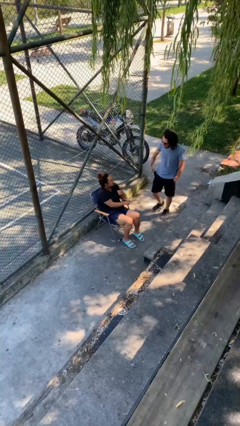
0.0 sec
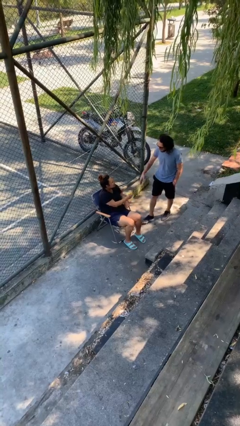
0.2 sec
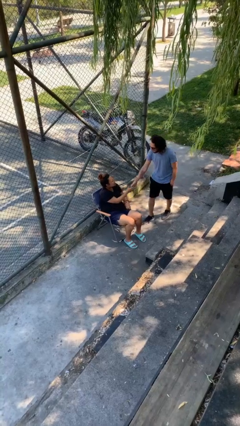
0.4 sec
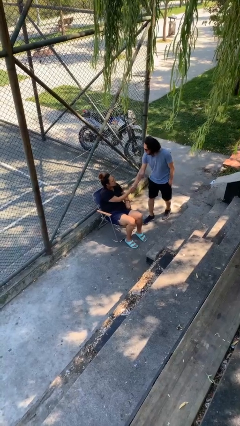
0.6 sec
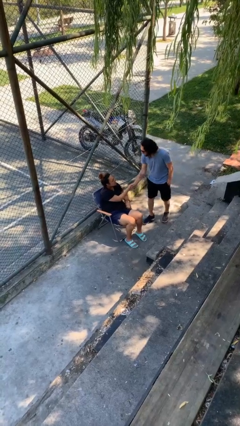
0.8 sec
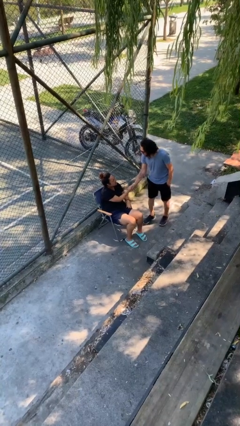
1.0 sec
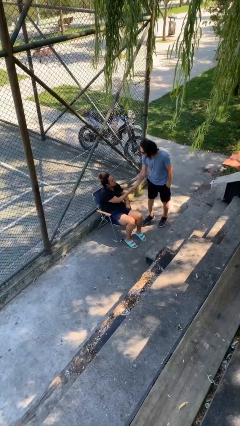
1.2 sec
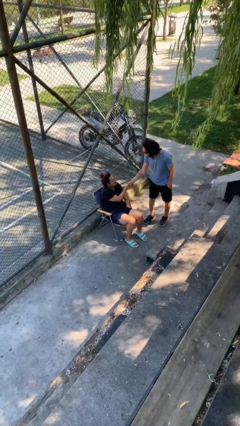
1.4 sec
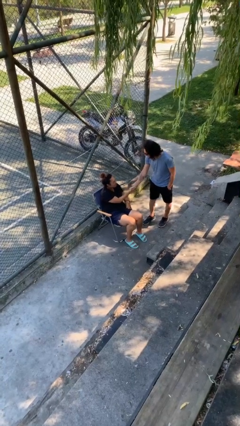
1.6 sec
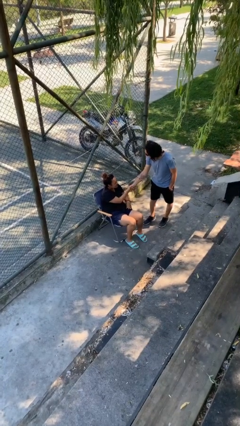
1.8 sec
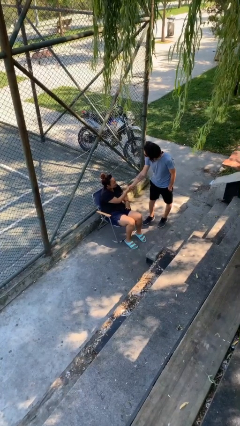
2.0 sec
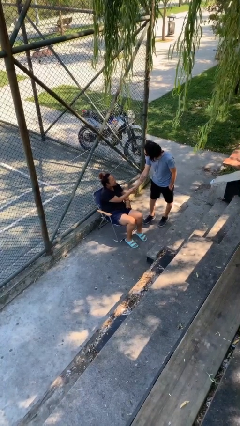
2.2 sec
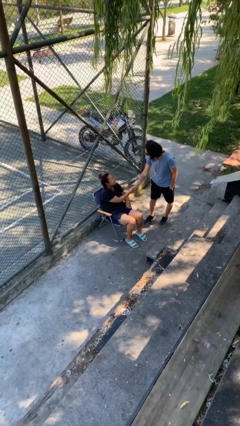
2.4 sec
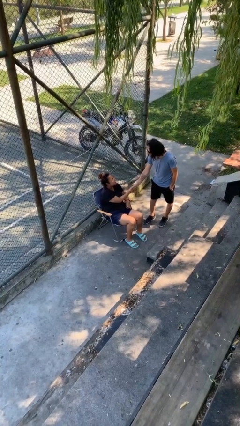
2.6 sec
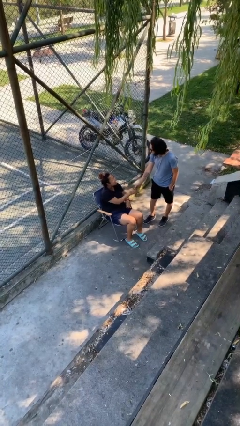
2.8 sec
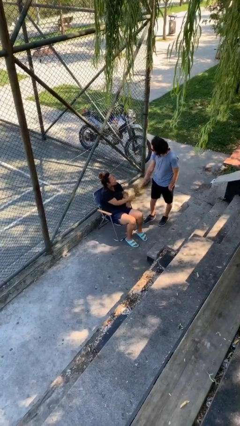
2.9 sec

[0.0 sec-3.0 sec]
person shakes hand

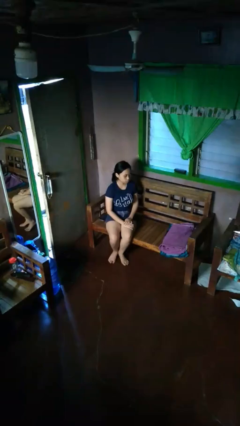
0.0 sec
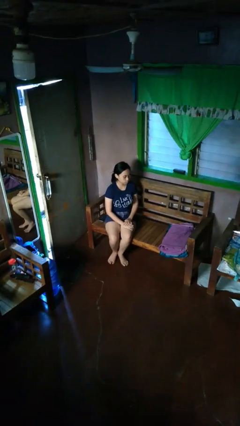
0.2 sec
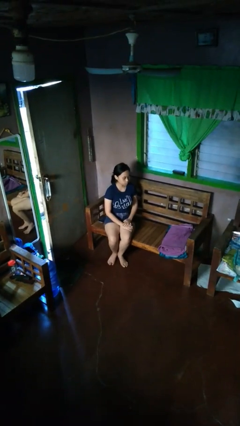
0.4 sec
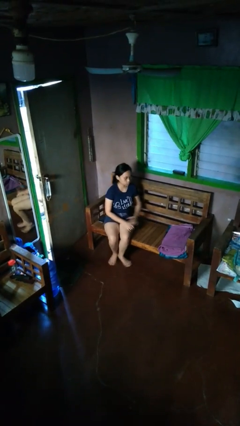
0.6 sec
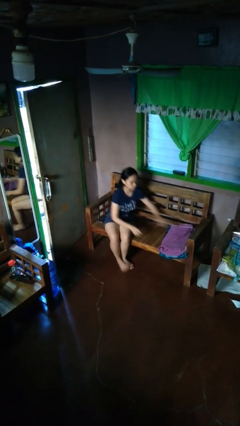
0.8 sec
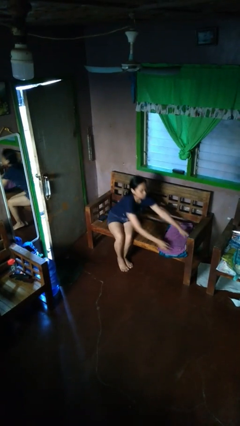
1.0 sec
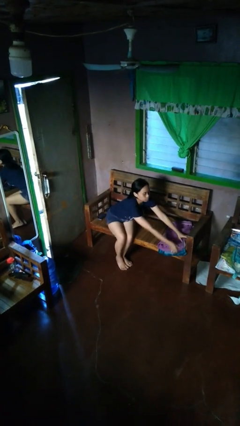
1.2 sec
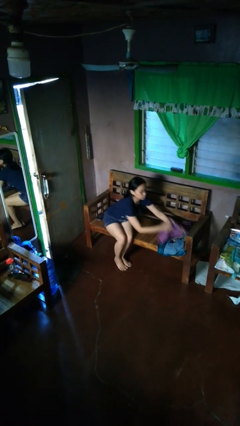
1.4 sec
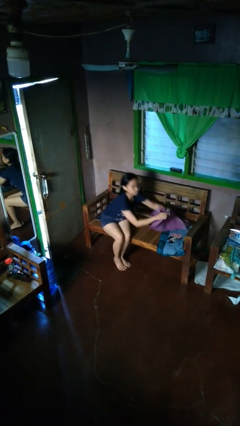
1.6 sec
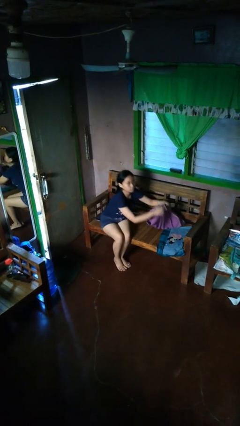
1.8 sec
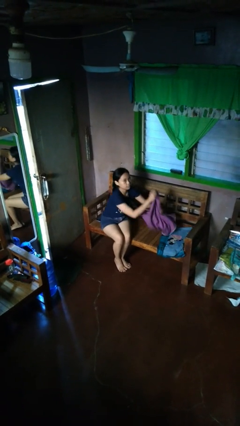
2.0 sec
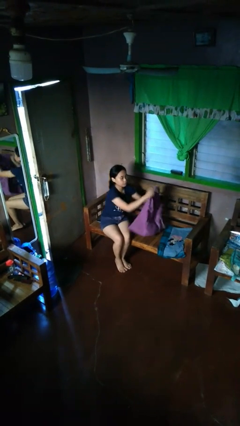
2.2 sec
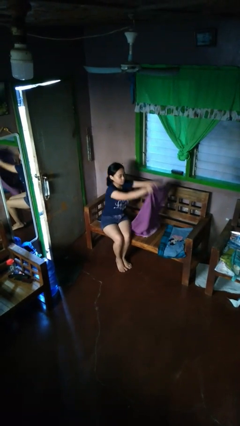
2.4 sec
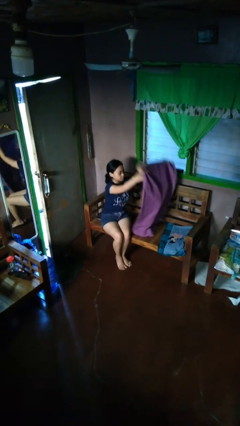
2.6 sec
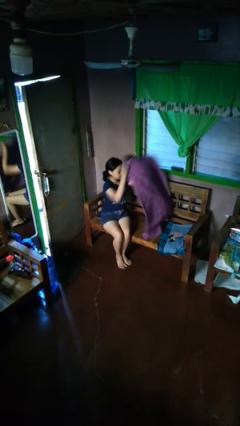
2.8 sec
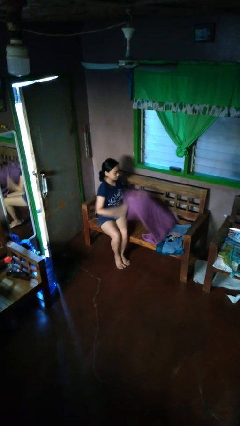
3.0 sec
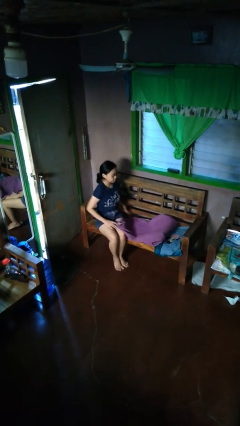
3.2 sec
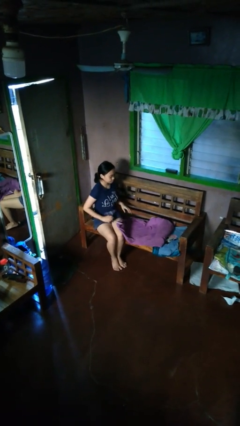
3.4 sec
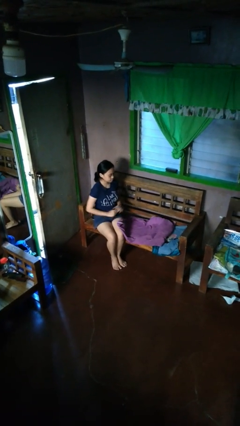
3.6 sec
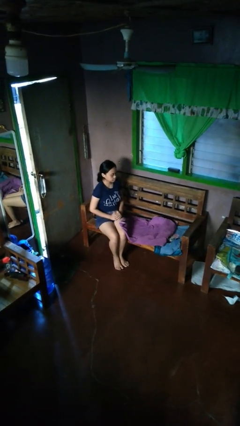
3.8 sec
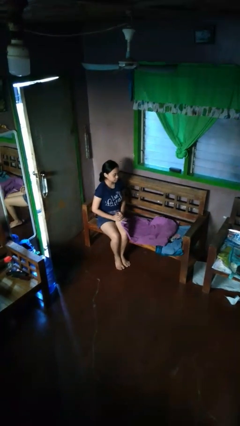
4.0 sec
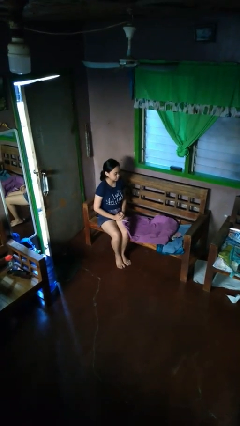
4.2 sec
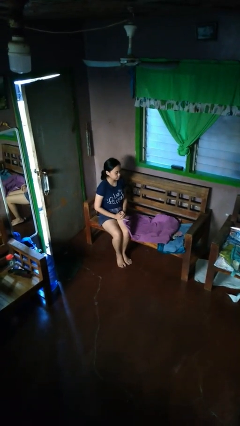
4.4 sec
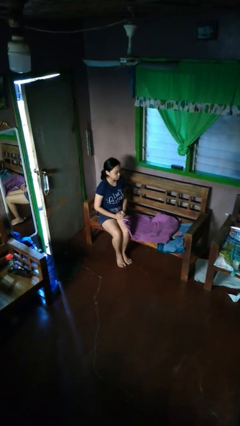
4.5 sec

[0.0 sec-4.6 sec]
person unfolds blanket

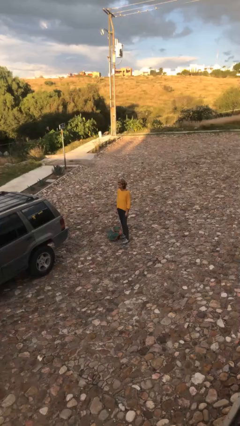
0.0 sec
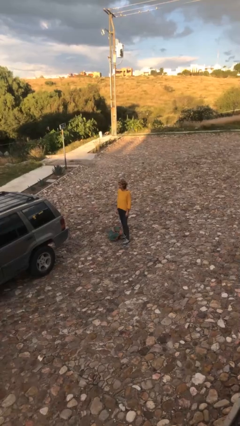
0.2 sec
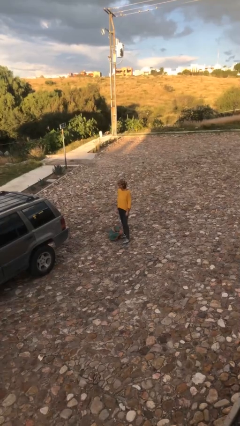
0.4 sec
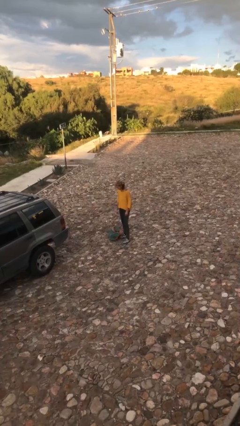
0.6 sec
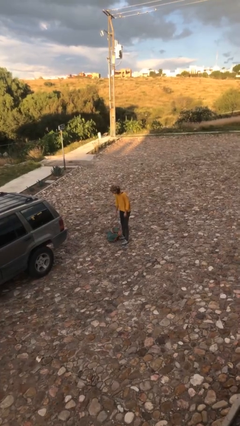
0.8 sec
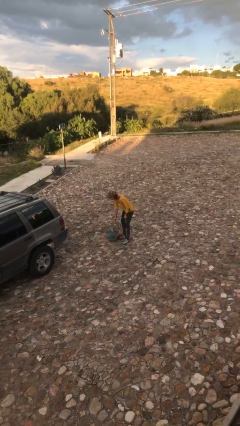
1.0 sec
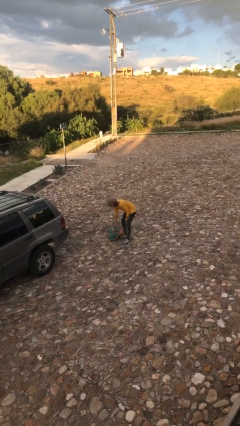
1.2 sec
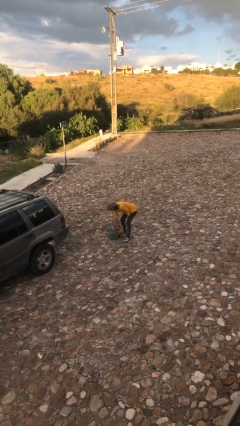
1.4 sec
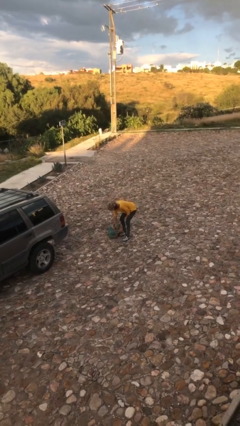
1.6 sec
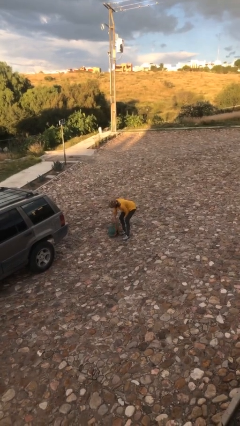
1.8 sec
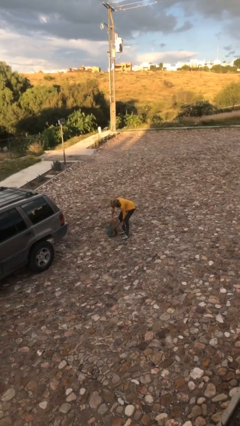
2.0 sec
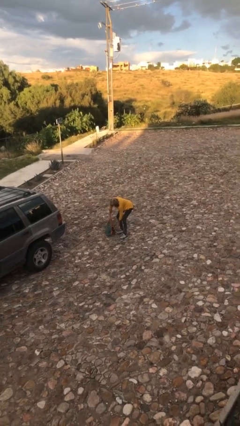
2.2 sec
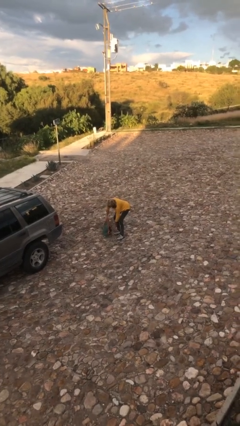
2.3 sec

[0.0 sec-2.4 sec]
person picks up object from floor

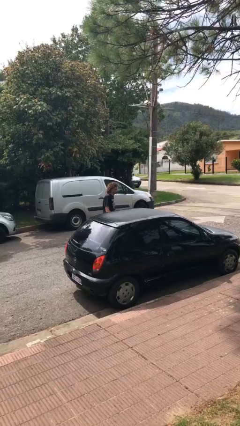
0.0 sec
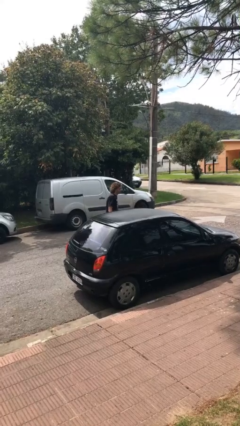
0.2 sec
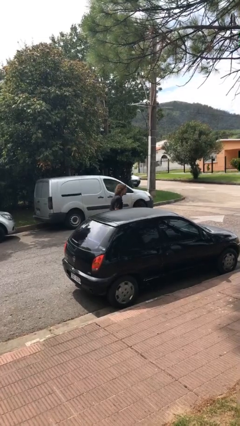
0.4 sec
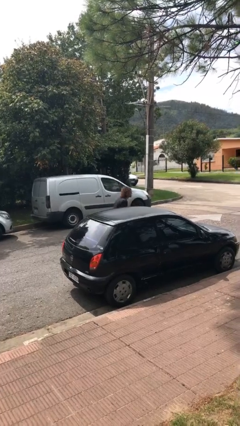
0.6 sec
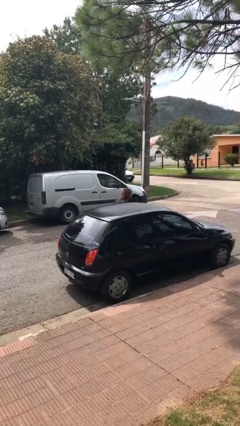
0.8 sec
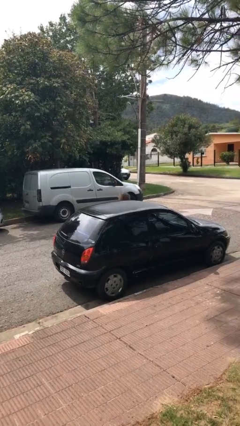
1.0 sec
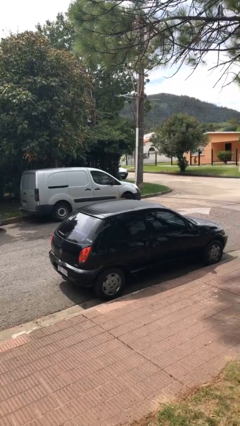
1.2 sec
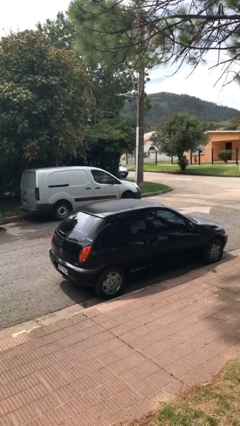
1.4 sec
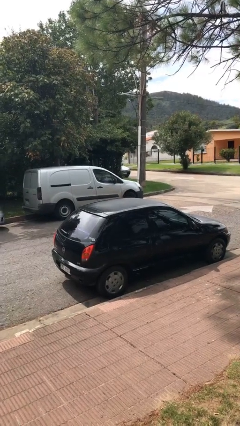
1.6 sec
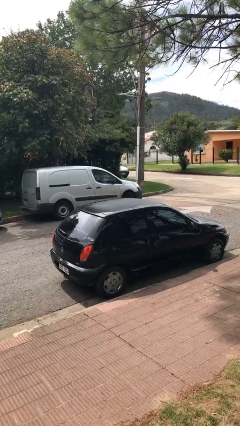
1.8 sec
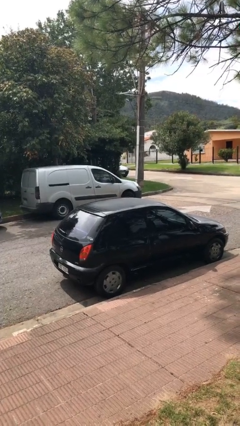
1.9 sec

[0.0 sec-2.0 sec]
person enters car

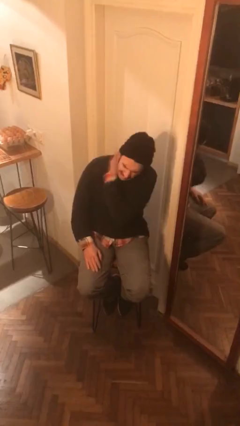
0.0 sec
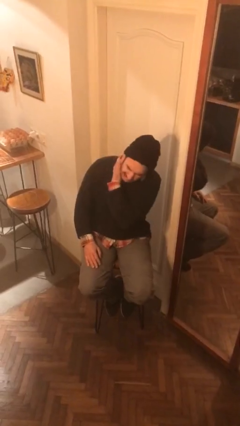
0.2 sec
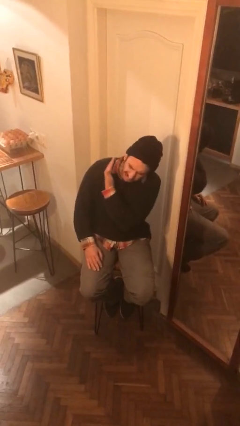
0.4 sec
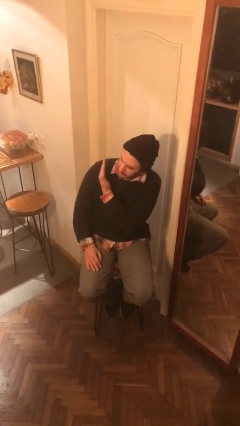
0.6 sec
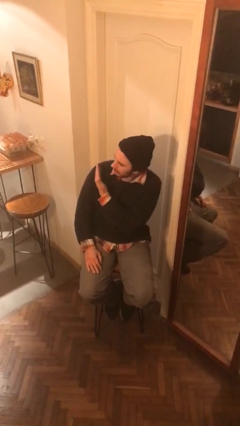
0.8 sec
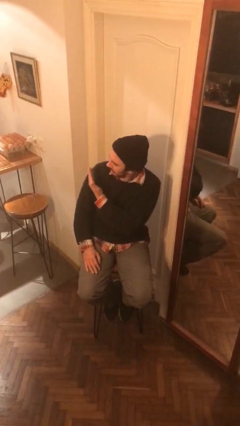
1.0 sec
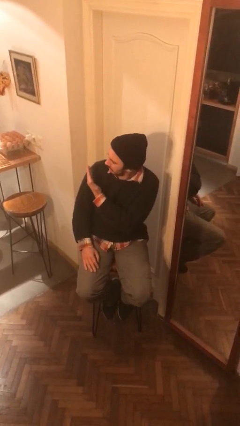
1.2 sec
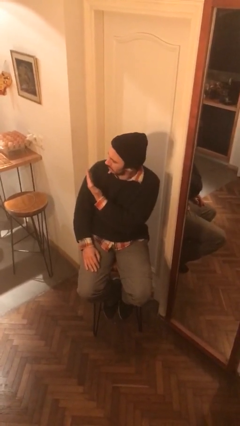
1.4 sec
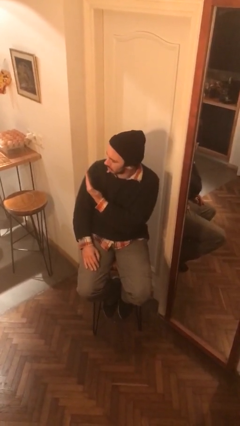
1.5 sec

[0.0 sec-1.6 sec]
person swats bug

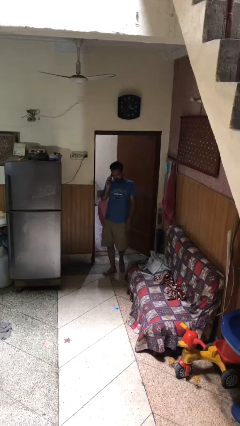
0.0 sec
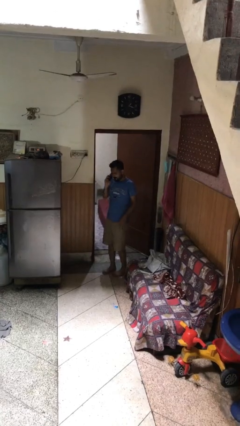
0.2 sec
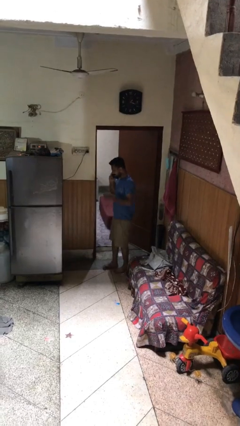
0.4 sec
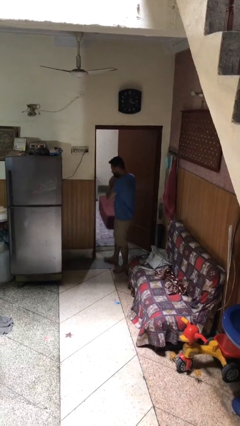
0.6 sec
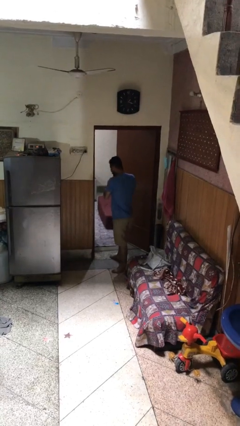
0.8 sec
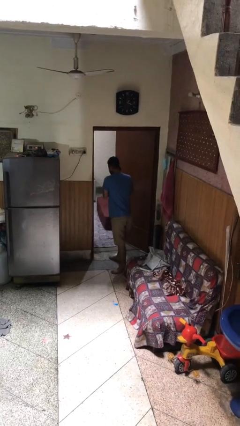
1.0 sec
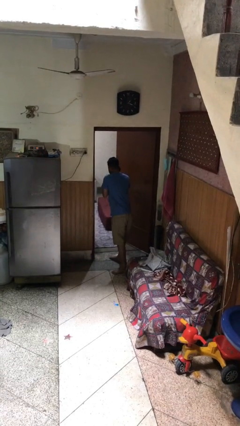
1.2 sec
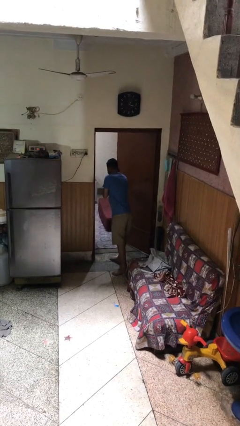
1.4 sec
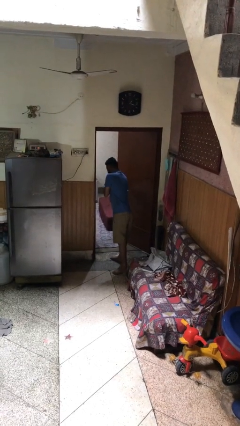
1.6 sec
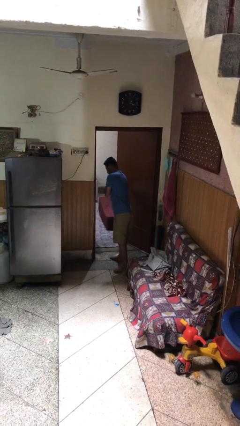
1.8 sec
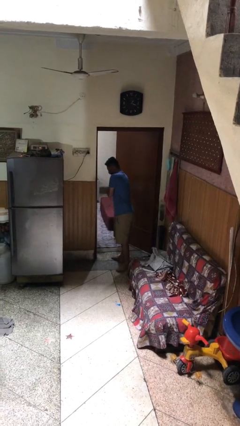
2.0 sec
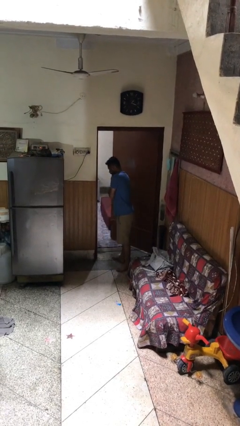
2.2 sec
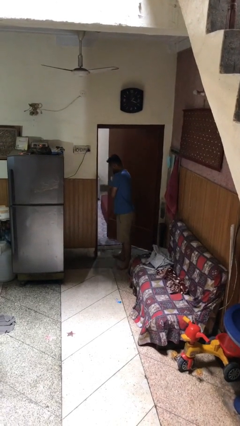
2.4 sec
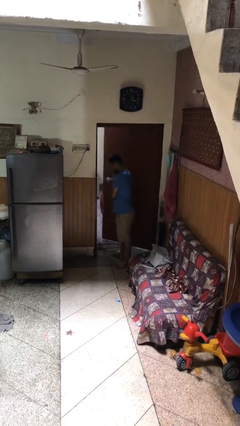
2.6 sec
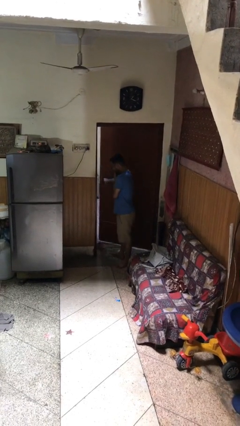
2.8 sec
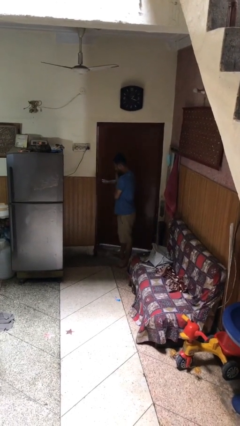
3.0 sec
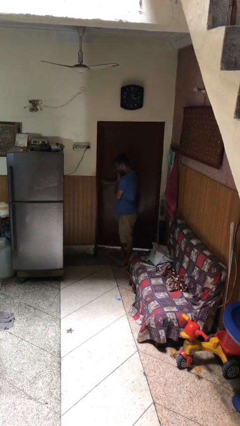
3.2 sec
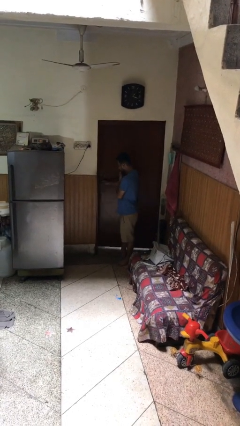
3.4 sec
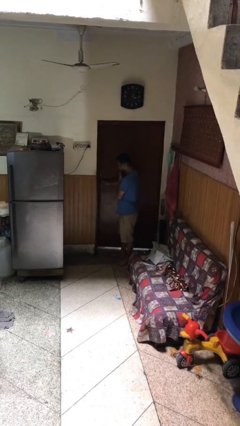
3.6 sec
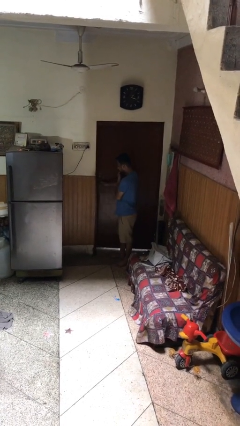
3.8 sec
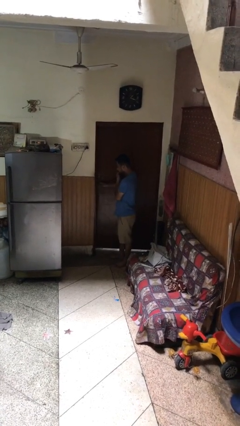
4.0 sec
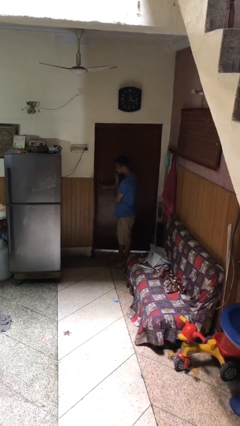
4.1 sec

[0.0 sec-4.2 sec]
person closes facility door
